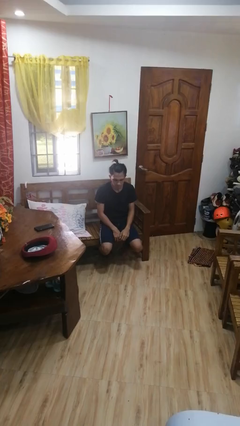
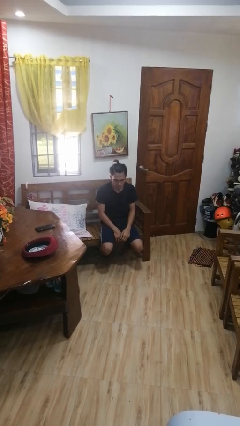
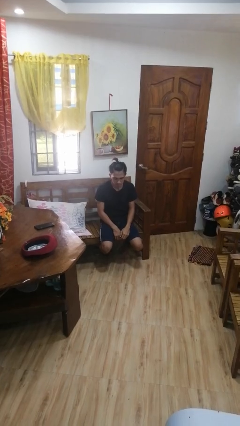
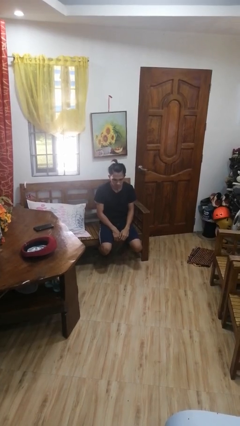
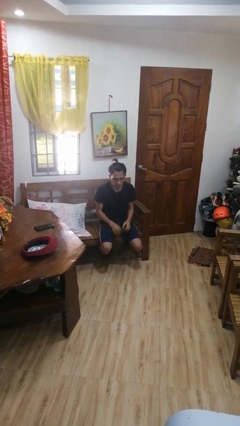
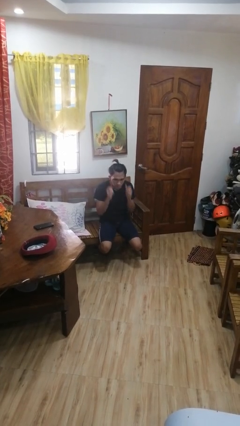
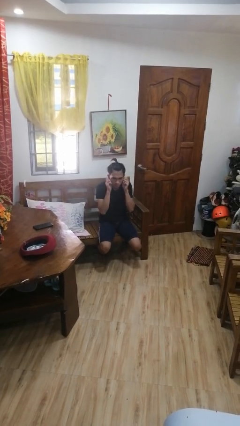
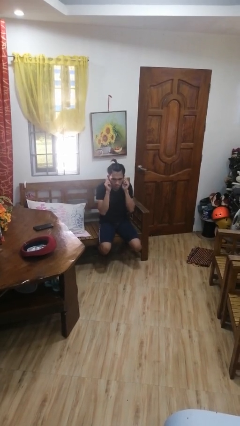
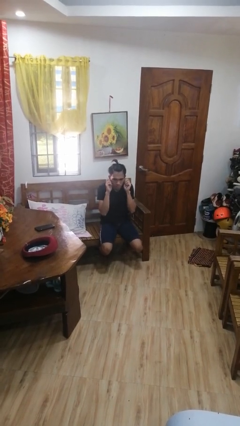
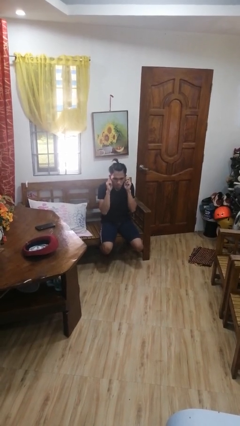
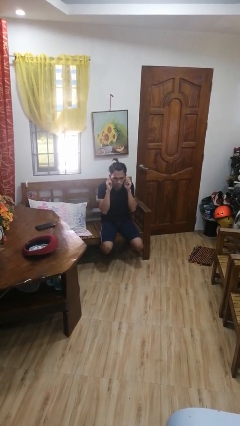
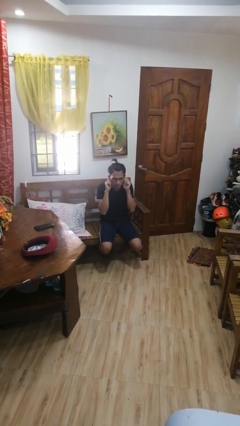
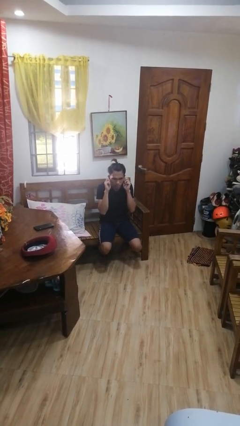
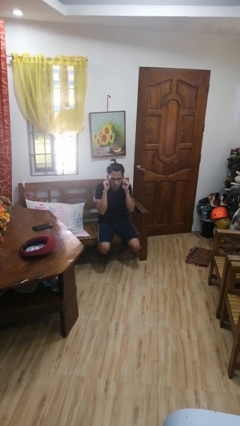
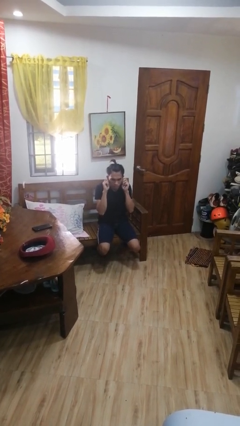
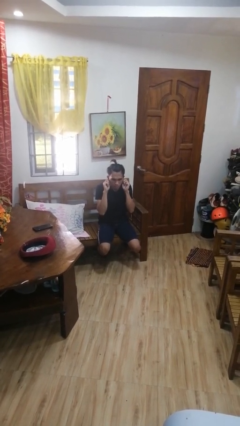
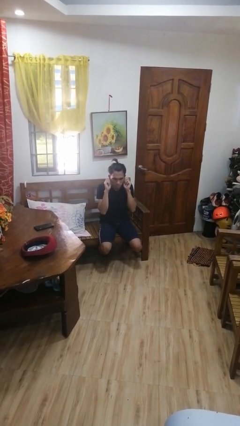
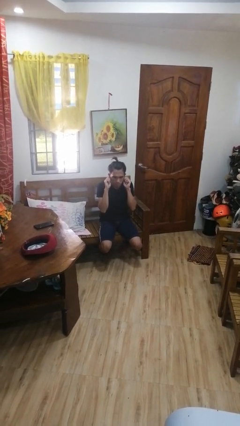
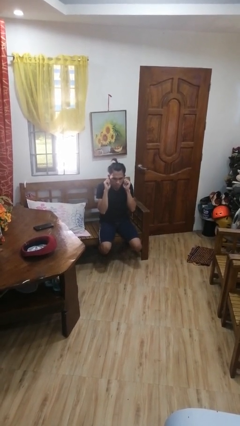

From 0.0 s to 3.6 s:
person touches earlobe

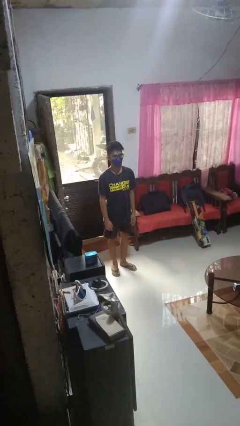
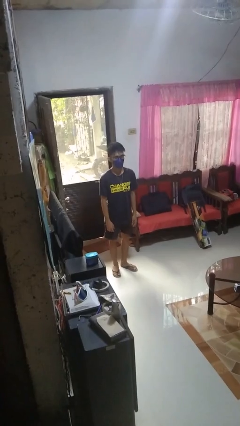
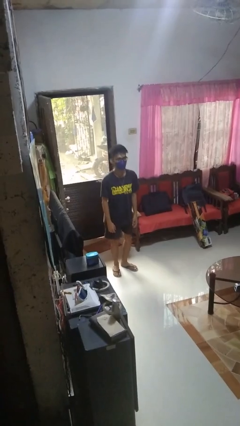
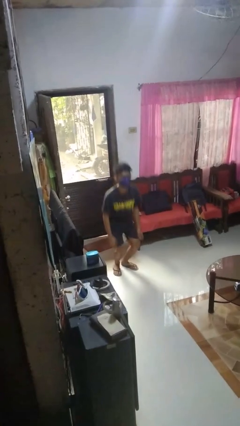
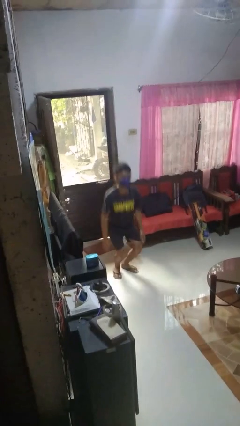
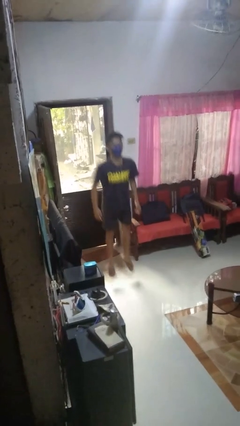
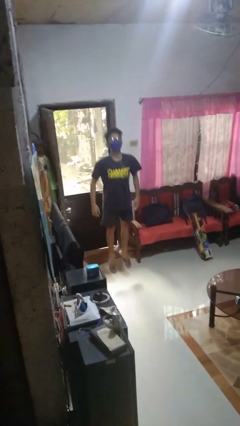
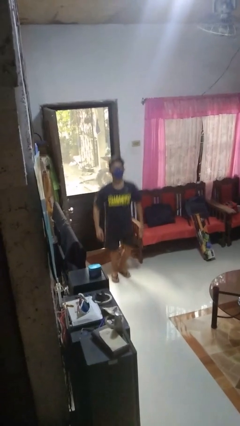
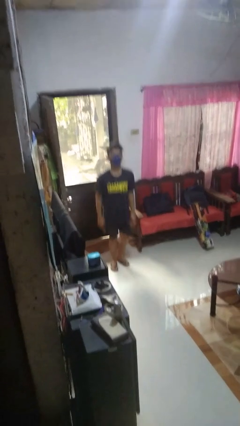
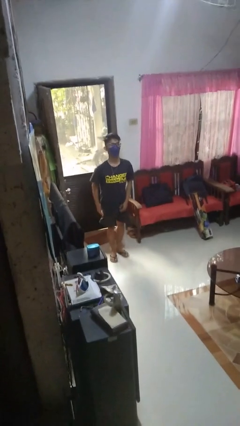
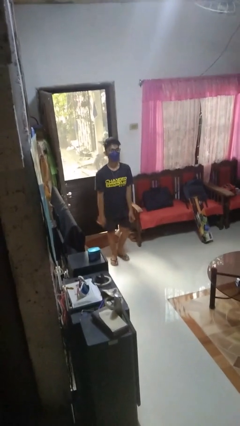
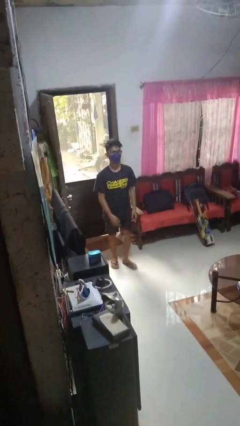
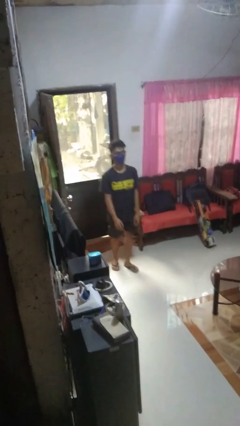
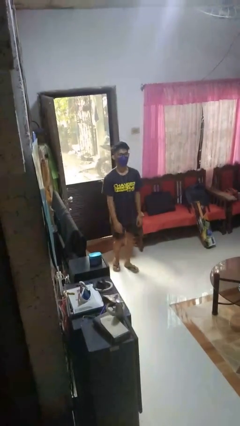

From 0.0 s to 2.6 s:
person jumps

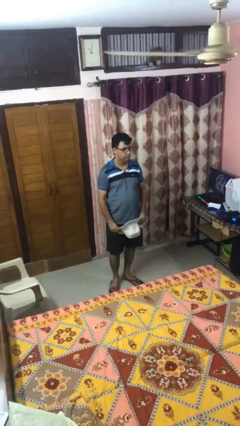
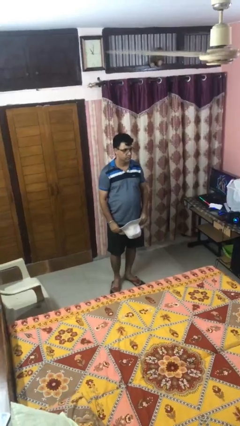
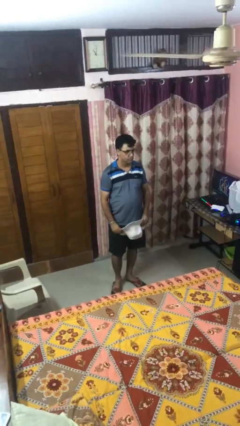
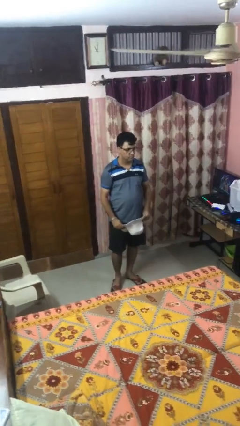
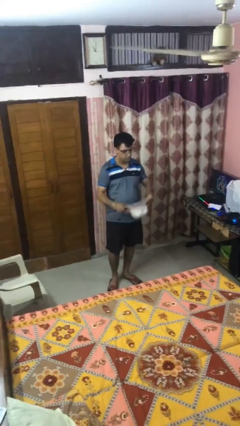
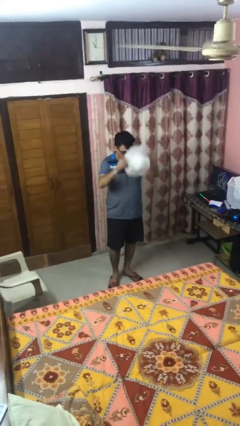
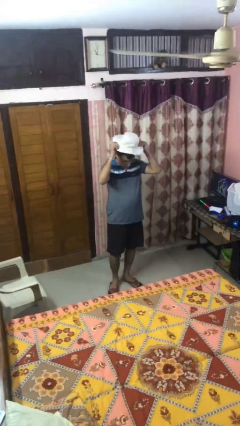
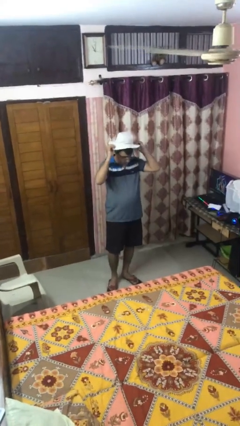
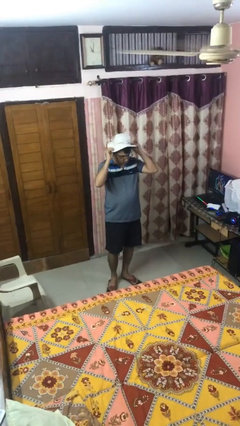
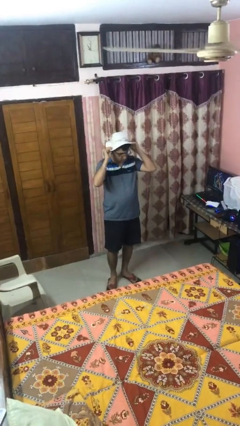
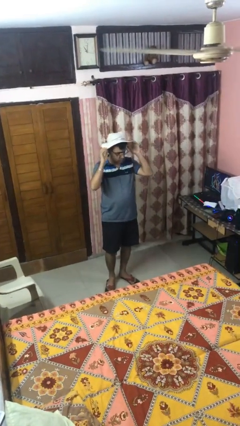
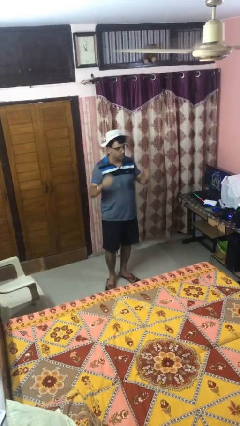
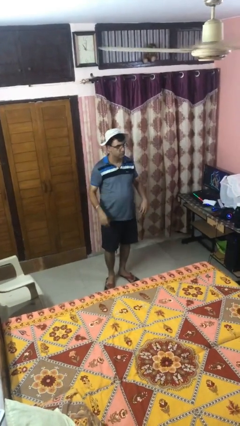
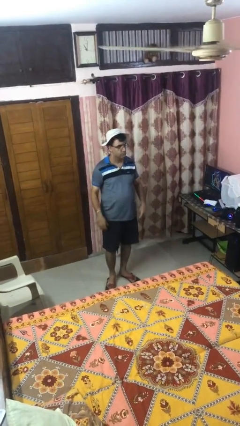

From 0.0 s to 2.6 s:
person puts on hat

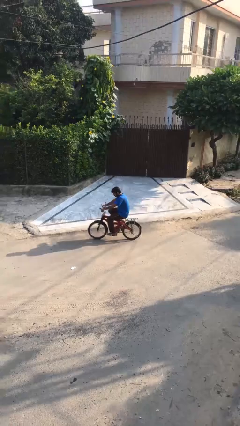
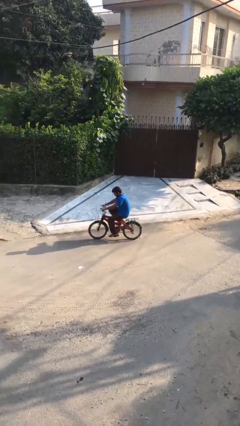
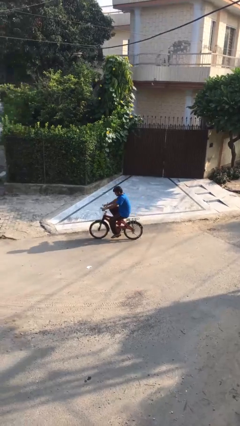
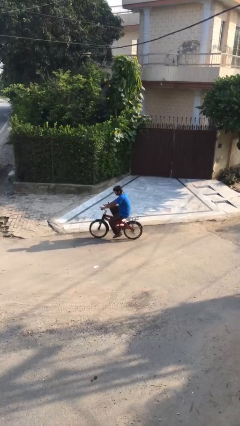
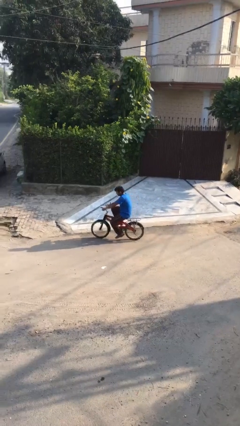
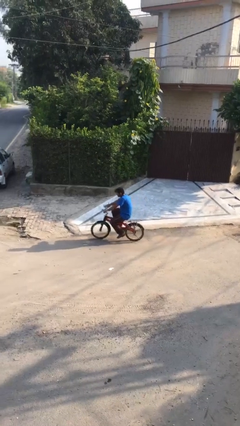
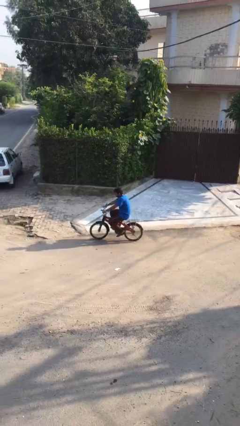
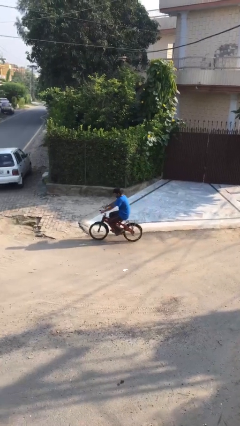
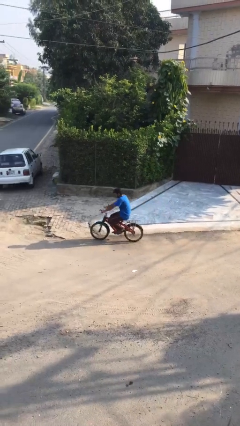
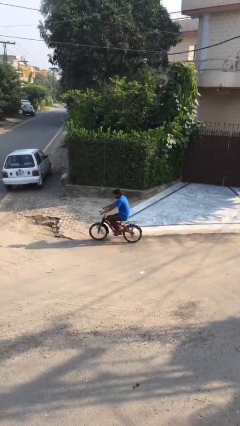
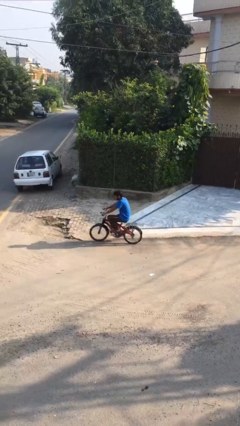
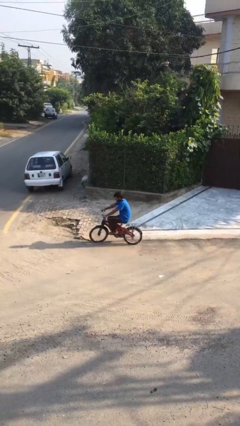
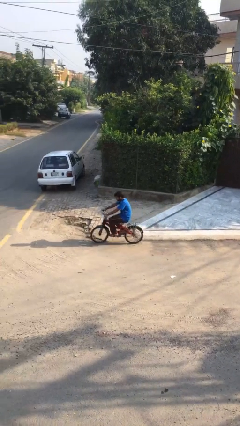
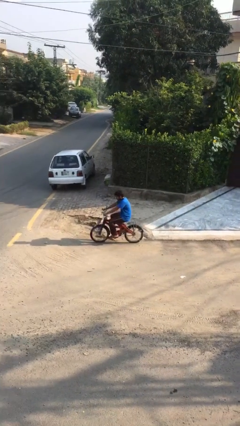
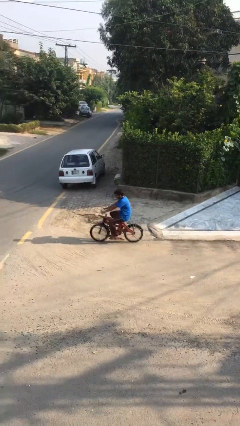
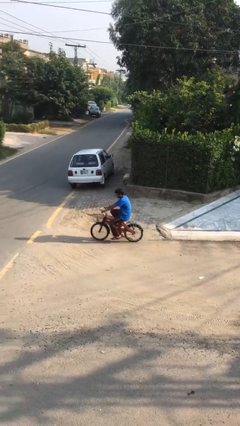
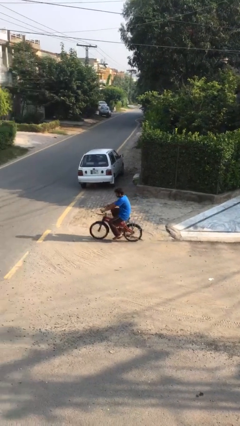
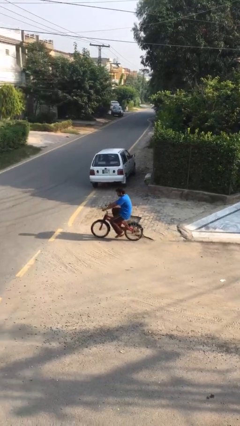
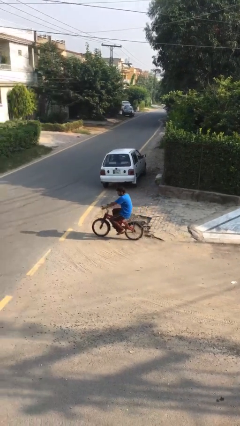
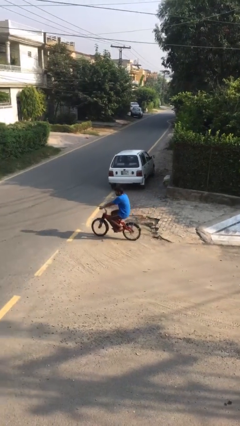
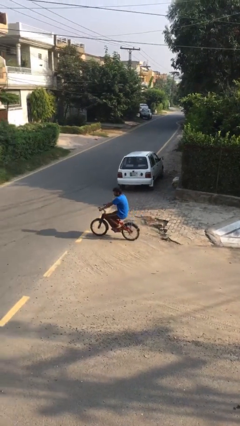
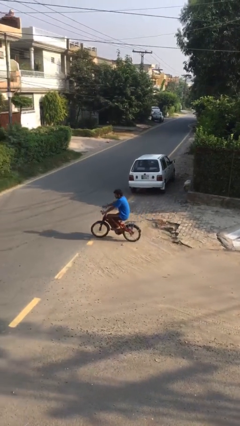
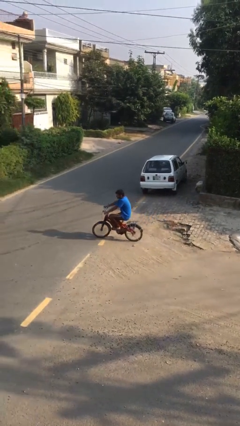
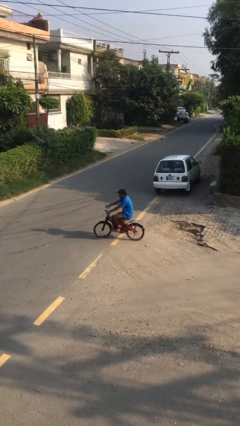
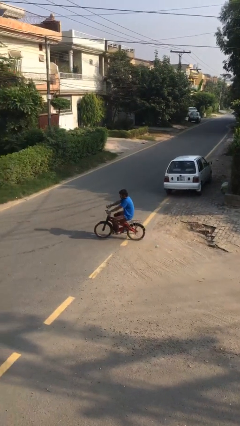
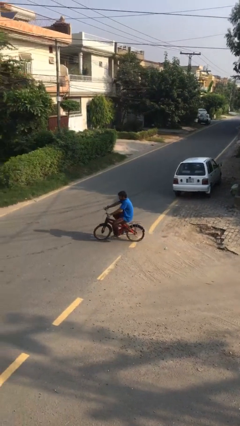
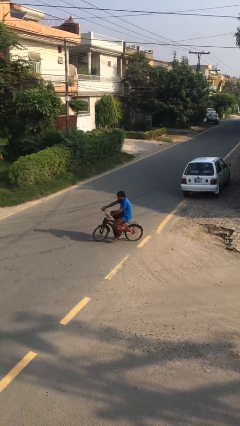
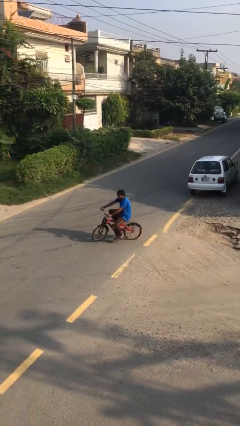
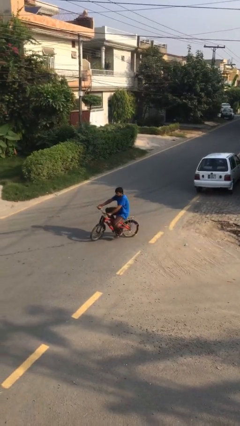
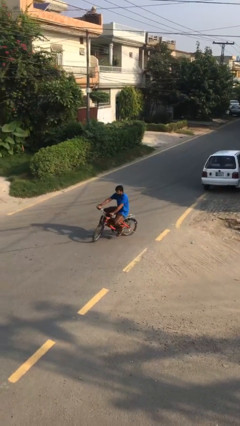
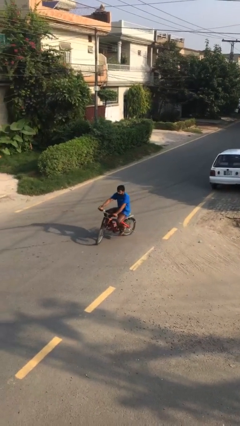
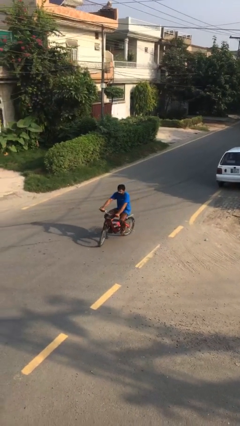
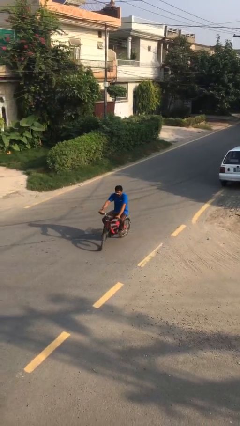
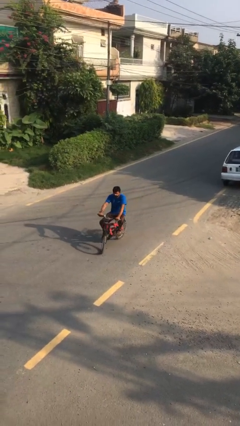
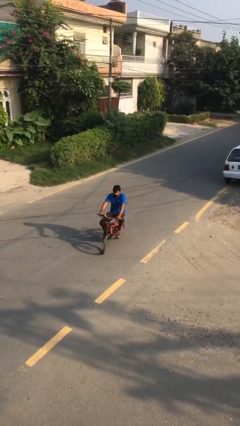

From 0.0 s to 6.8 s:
person rides bicycle

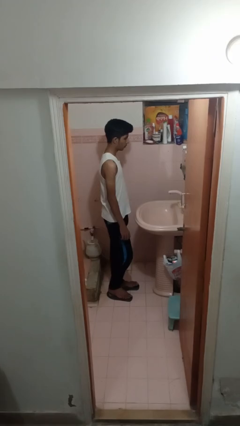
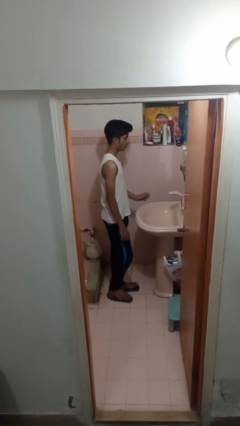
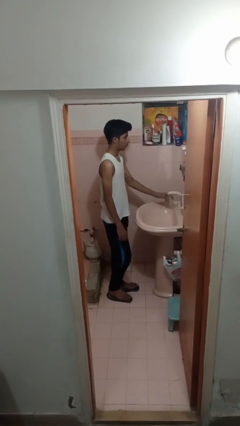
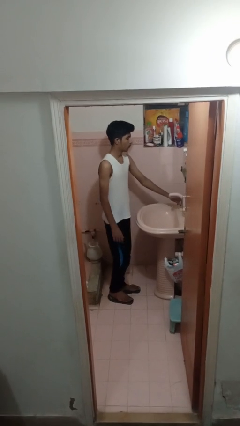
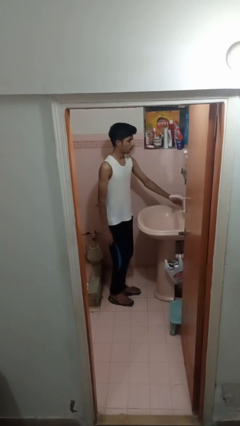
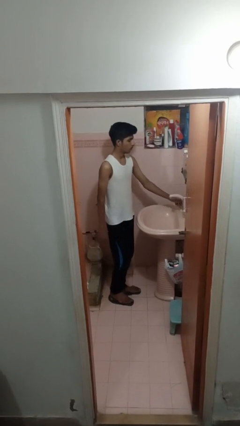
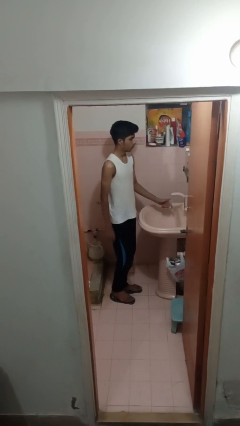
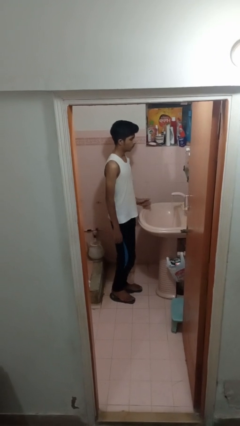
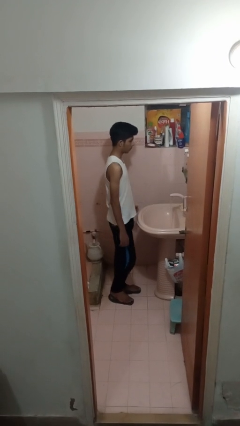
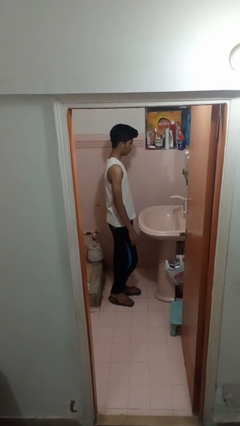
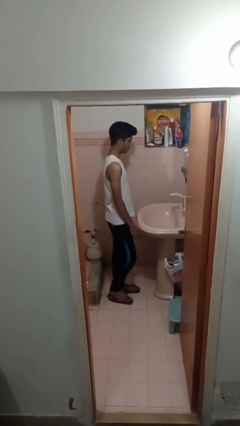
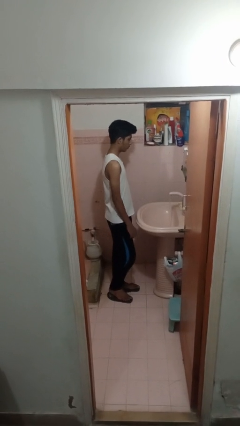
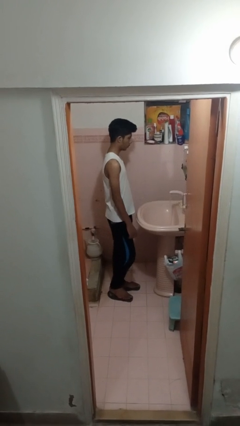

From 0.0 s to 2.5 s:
person turns on faucet
